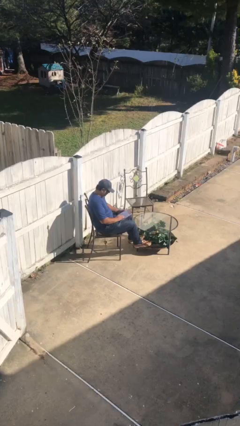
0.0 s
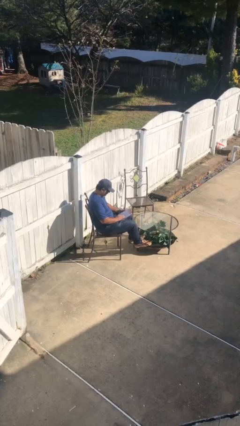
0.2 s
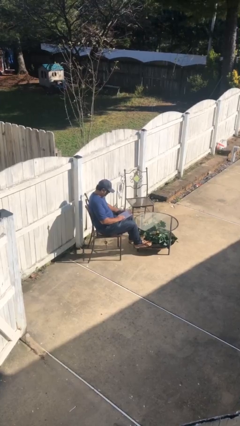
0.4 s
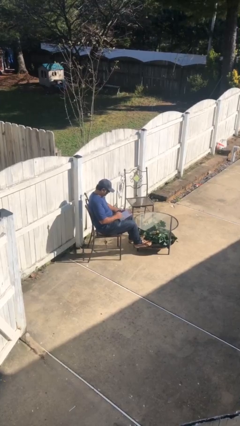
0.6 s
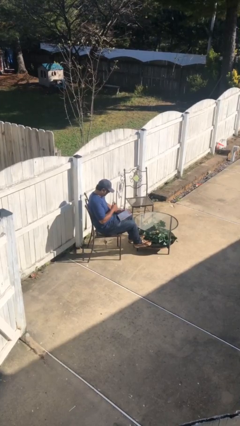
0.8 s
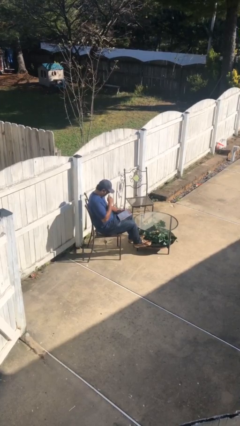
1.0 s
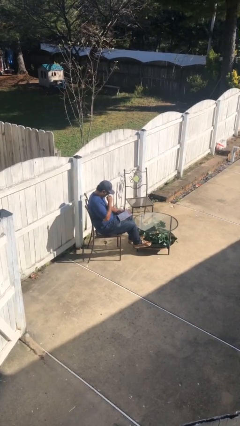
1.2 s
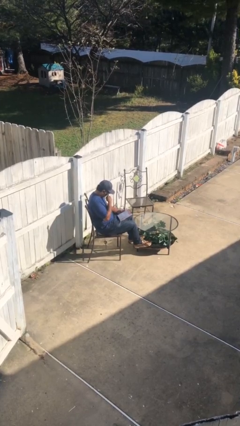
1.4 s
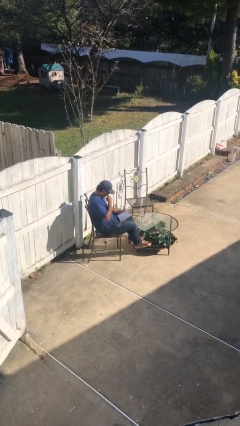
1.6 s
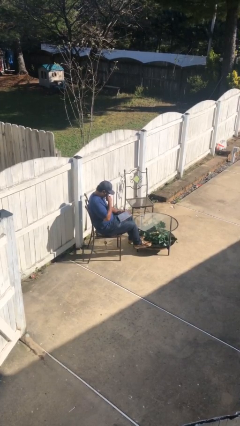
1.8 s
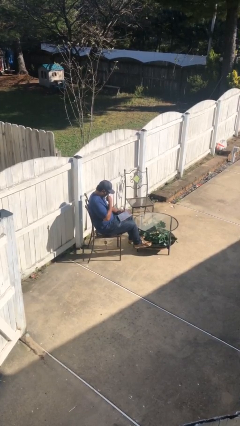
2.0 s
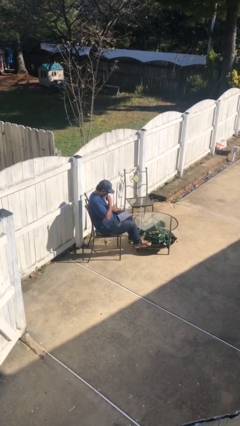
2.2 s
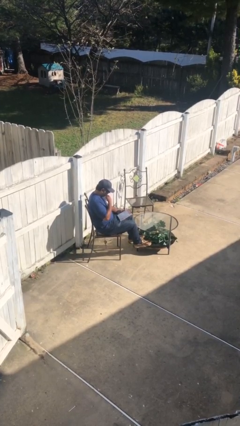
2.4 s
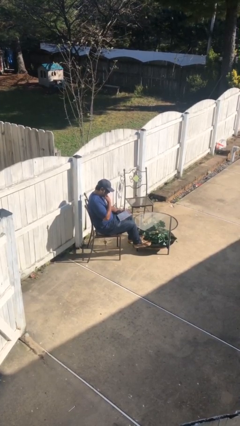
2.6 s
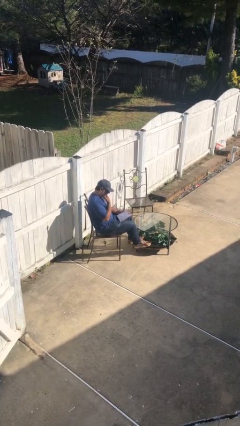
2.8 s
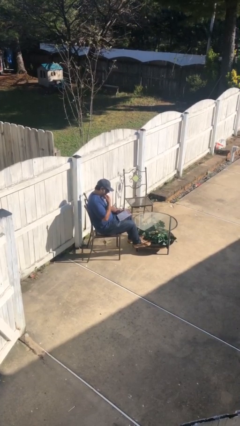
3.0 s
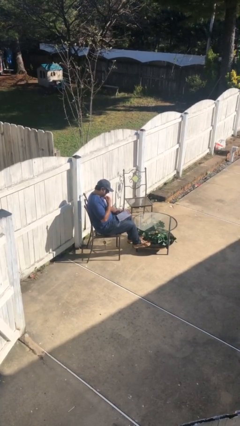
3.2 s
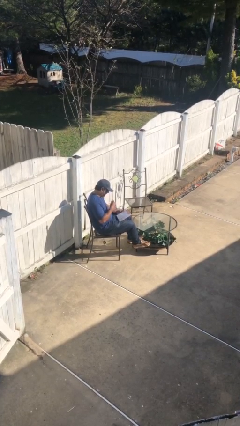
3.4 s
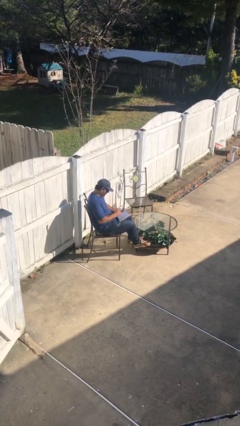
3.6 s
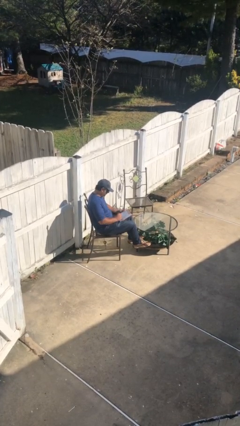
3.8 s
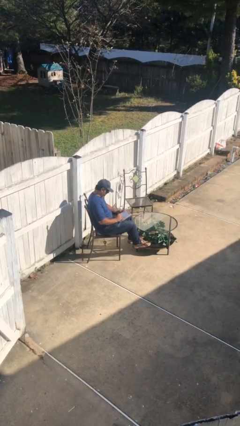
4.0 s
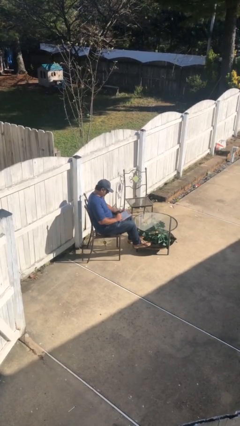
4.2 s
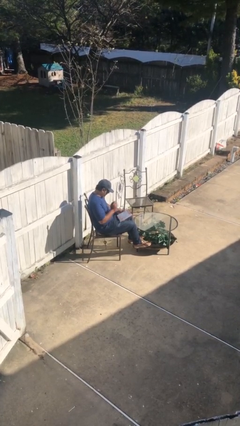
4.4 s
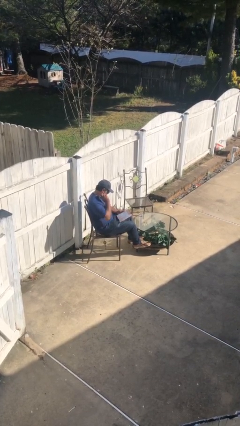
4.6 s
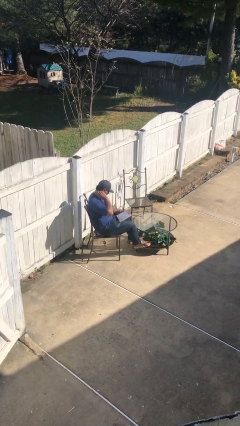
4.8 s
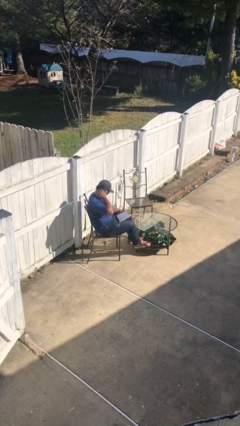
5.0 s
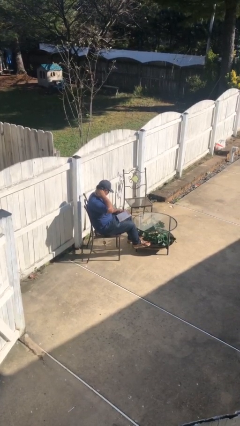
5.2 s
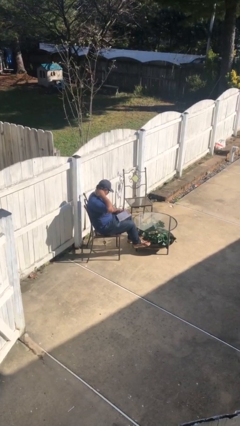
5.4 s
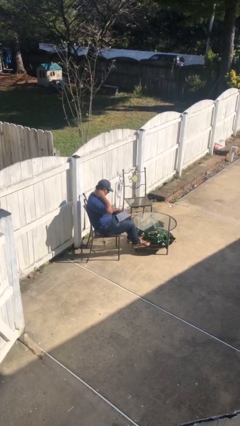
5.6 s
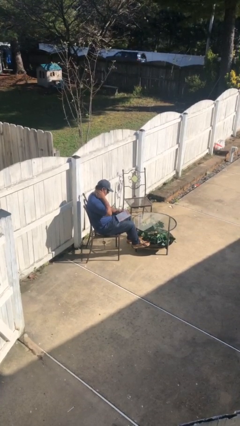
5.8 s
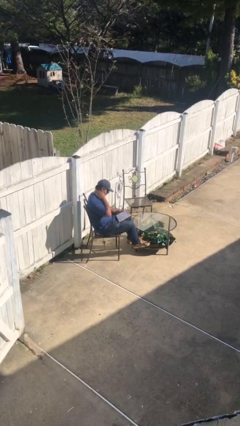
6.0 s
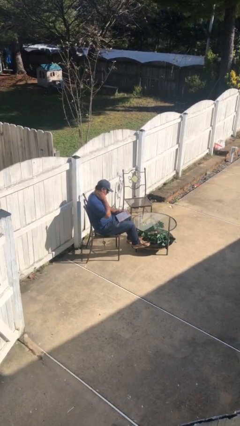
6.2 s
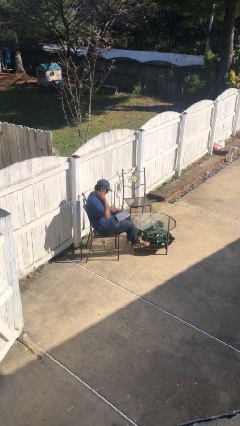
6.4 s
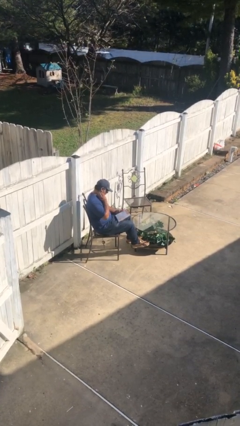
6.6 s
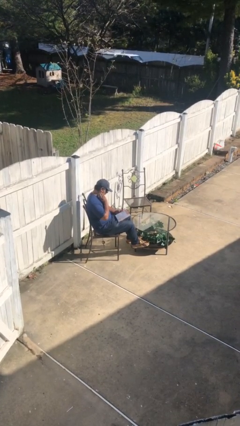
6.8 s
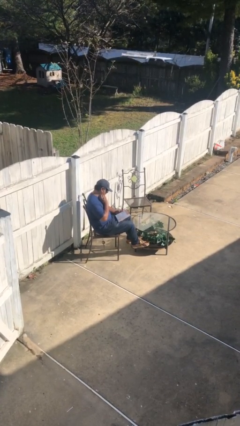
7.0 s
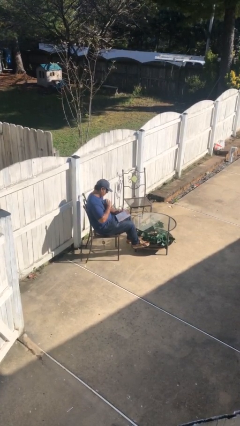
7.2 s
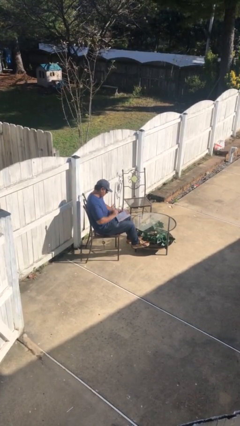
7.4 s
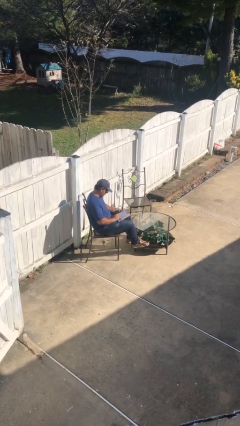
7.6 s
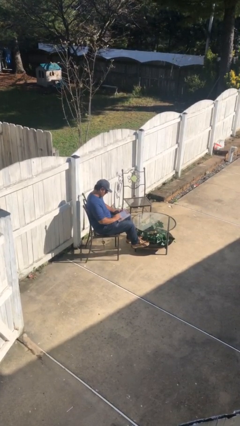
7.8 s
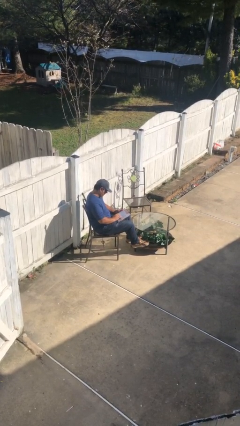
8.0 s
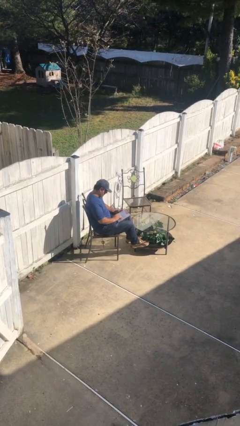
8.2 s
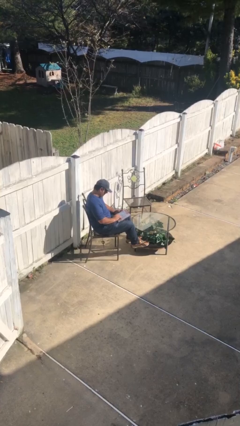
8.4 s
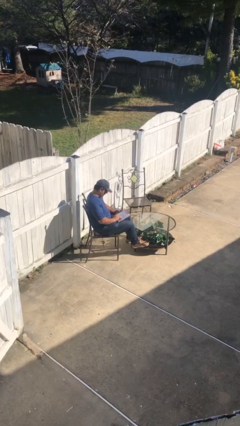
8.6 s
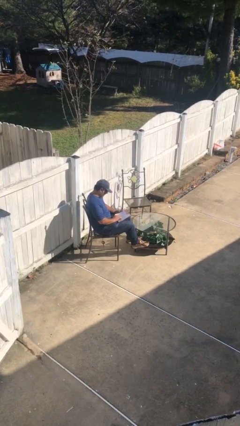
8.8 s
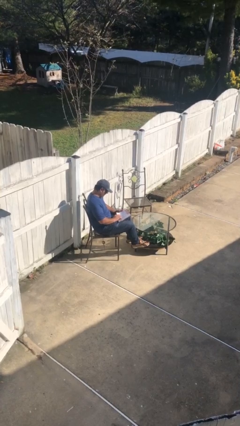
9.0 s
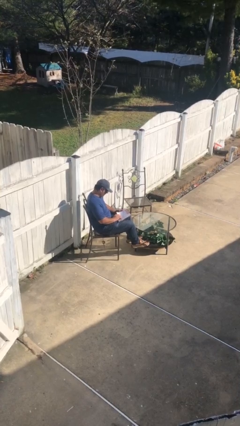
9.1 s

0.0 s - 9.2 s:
person reads document

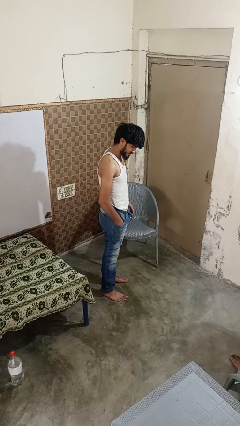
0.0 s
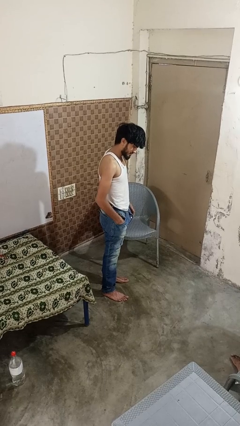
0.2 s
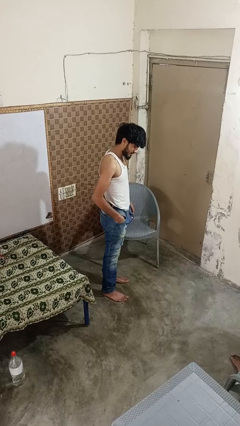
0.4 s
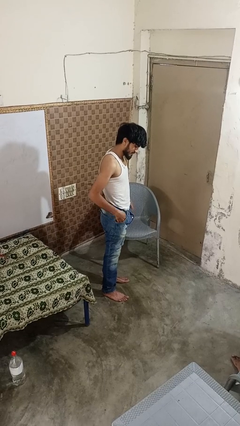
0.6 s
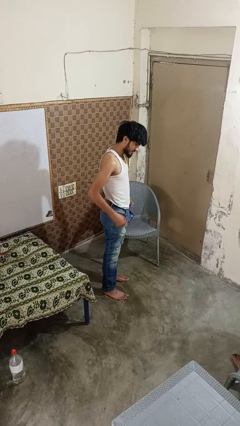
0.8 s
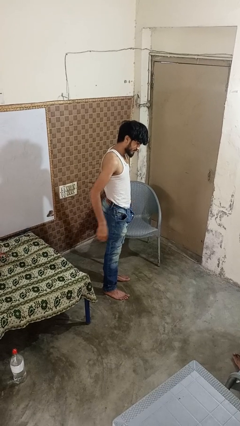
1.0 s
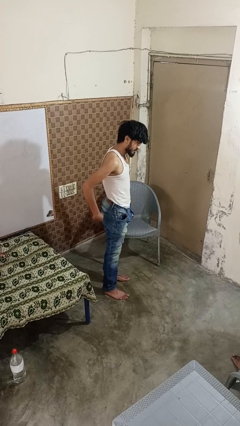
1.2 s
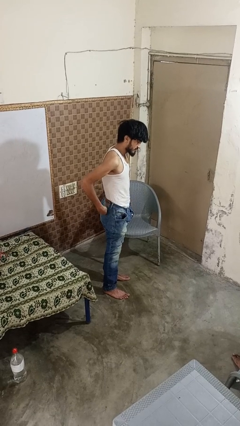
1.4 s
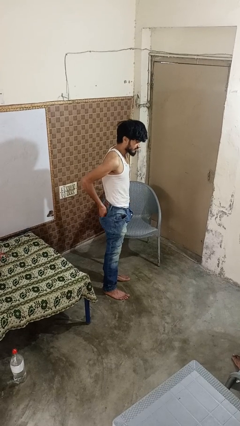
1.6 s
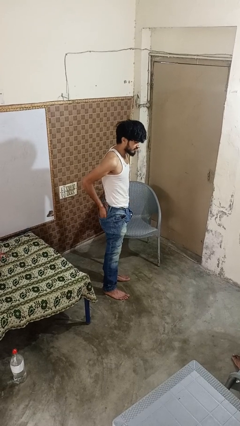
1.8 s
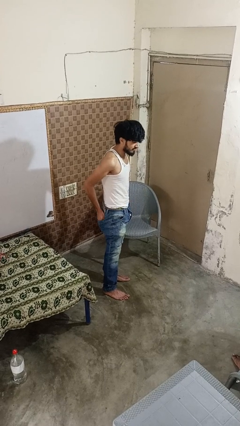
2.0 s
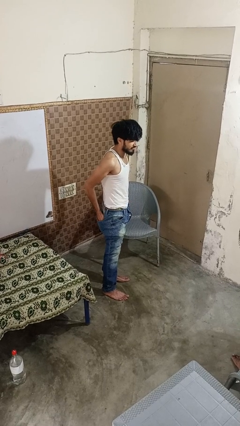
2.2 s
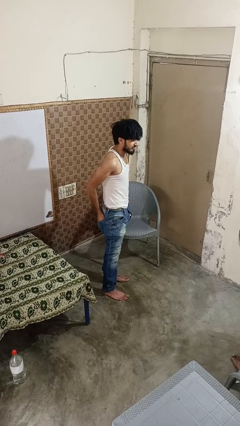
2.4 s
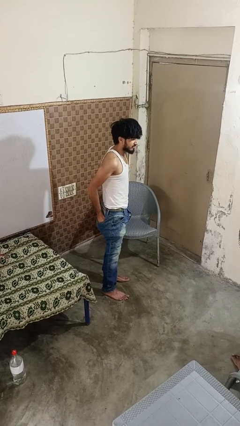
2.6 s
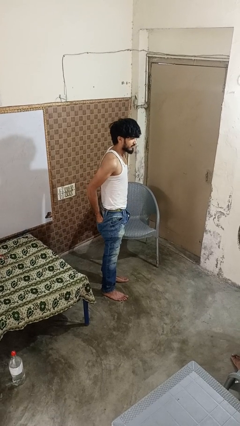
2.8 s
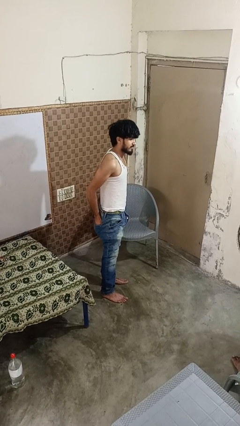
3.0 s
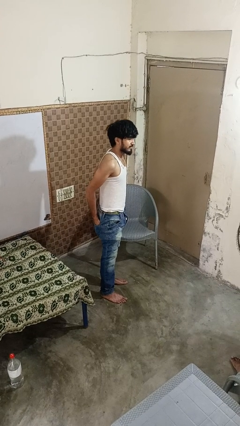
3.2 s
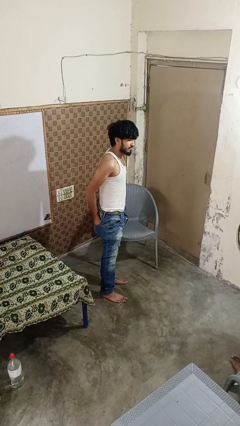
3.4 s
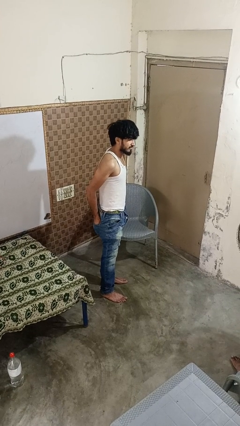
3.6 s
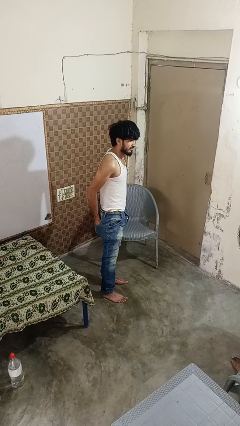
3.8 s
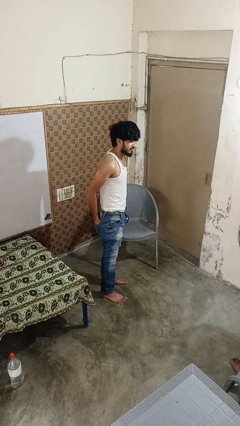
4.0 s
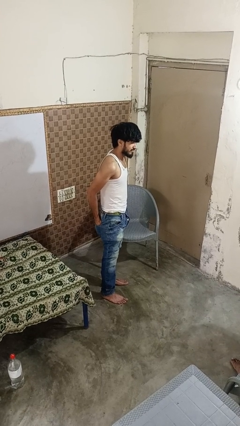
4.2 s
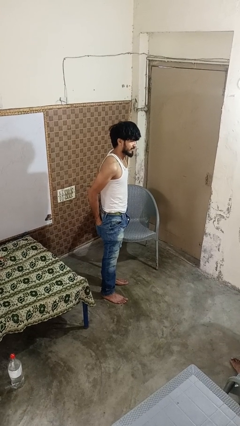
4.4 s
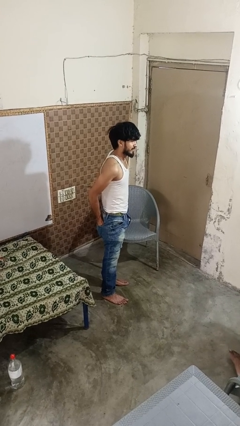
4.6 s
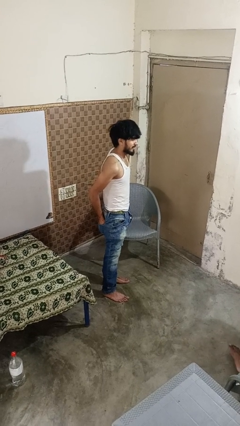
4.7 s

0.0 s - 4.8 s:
person puts hands in back pockets

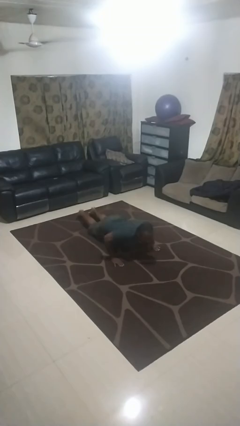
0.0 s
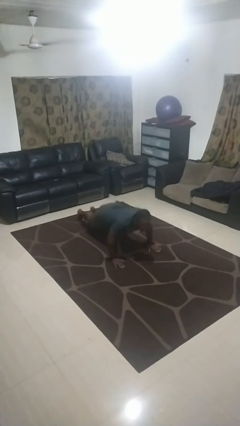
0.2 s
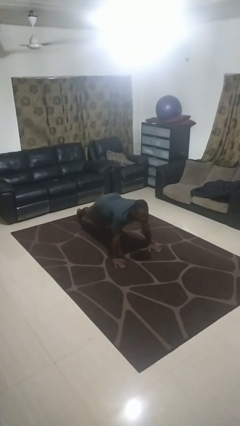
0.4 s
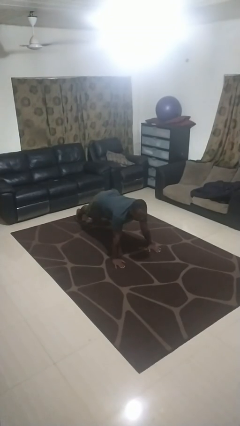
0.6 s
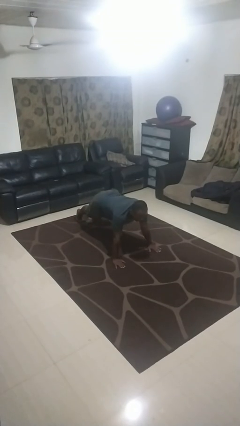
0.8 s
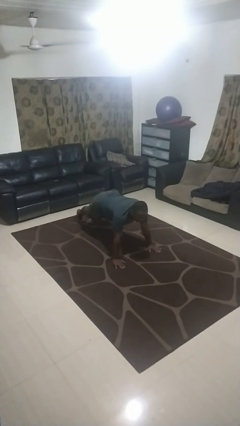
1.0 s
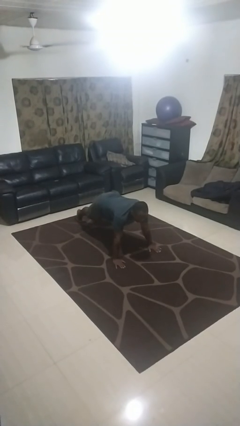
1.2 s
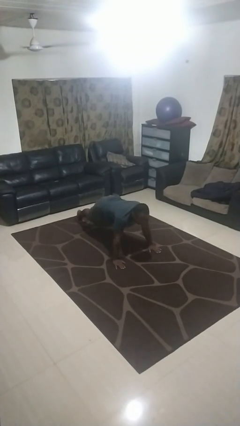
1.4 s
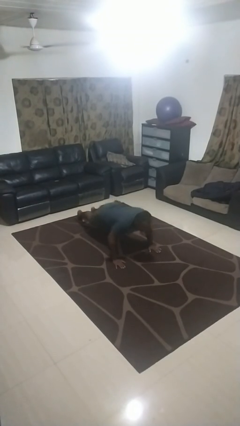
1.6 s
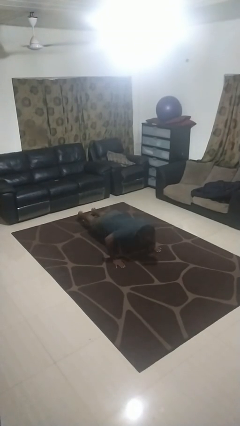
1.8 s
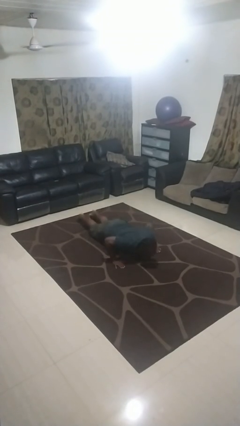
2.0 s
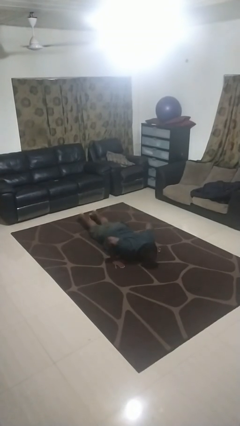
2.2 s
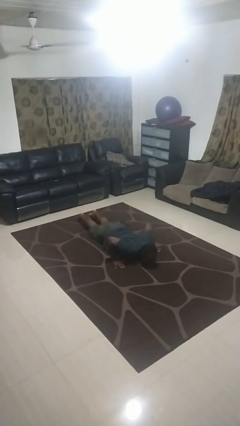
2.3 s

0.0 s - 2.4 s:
person exercises with pushup

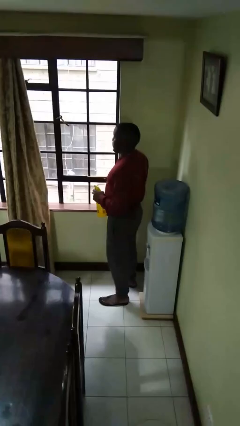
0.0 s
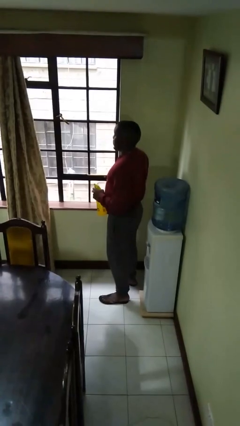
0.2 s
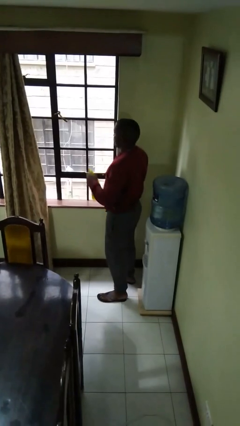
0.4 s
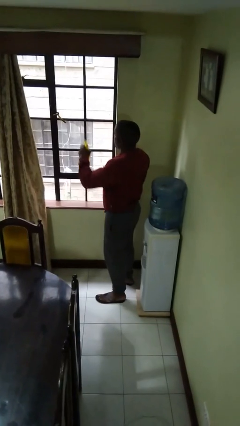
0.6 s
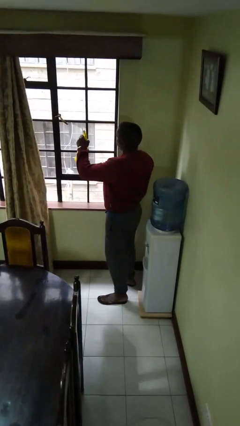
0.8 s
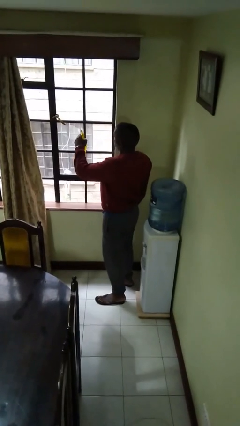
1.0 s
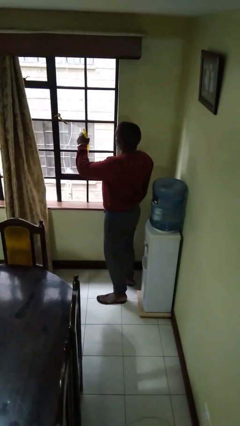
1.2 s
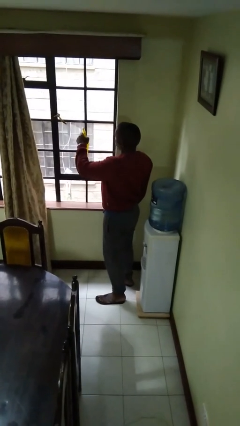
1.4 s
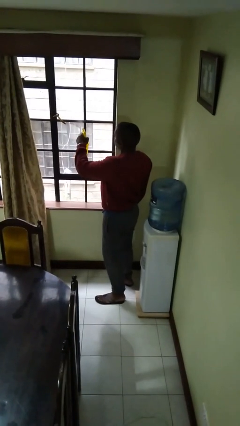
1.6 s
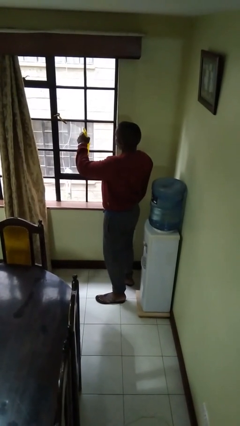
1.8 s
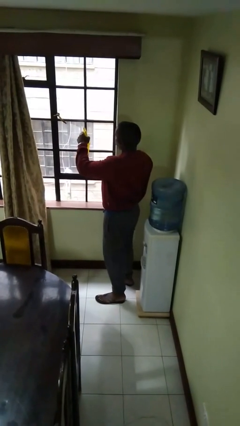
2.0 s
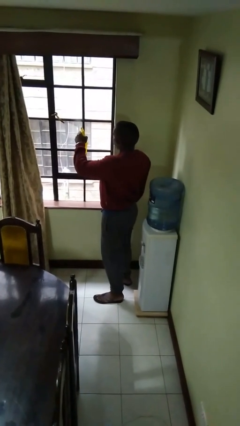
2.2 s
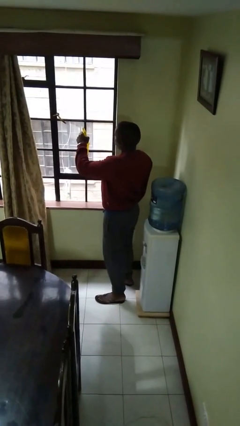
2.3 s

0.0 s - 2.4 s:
person sprays from bottle
